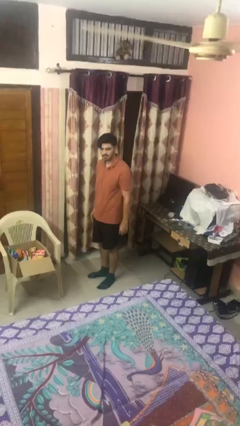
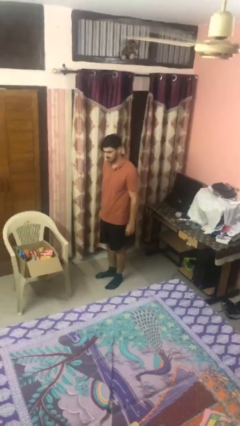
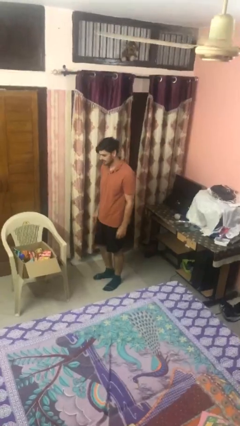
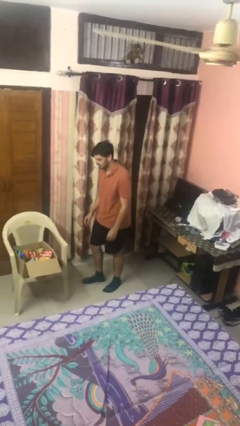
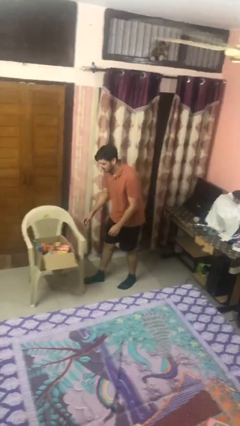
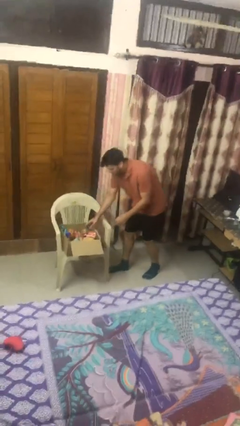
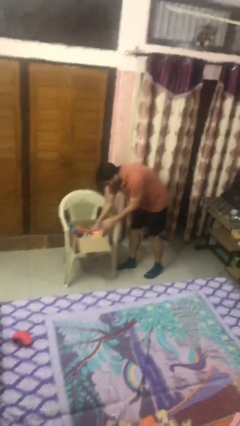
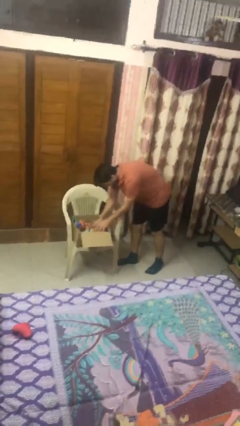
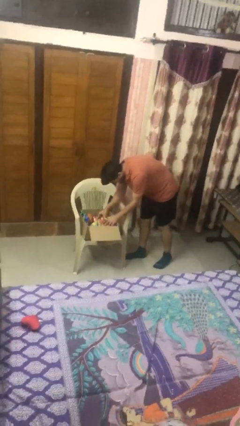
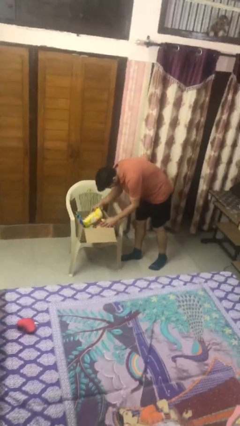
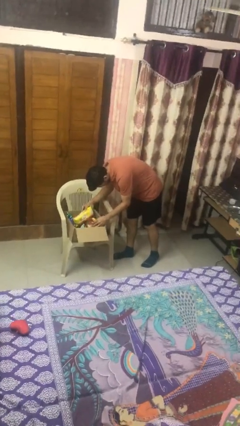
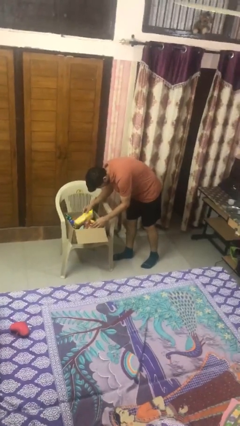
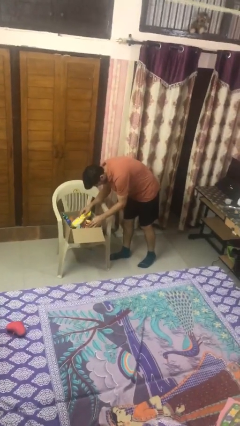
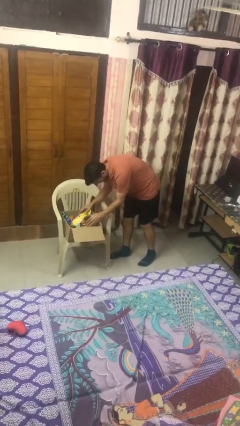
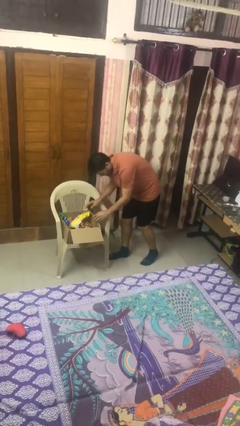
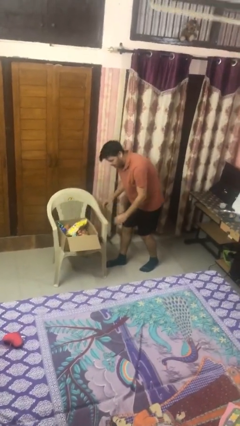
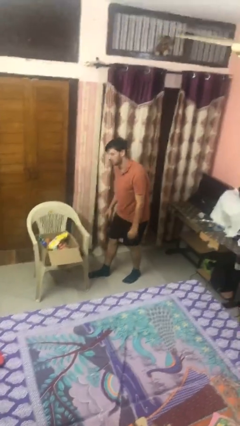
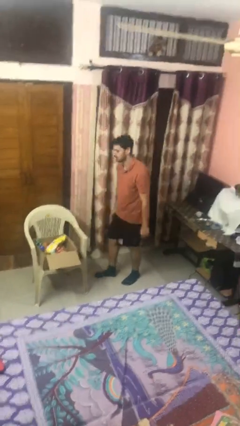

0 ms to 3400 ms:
person searches in box

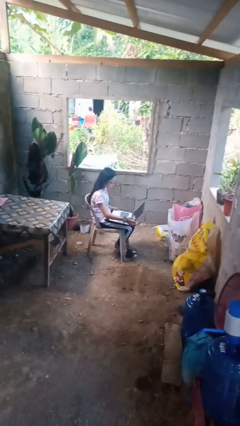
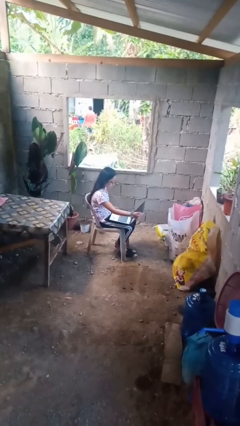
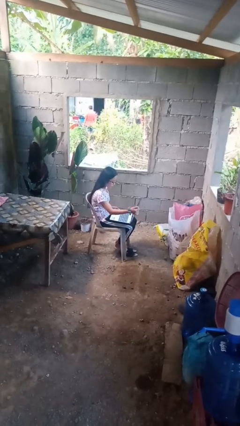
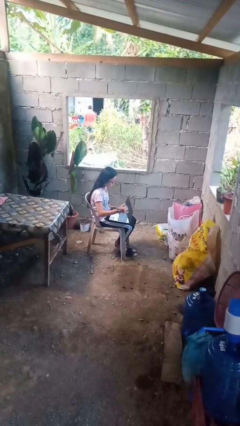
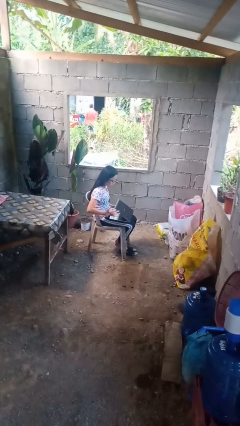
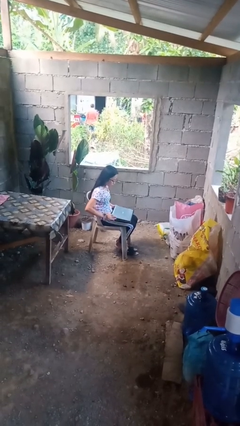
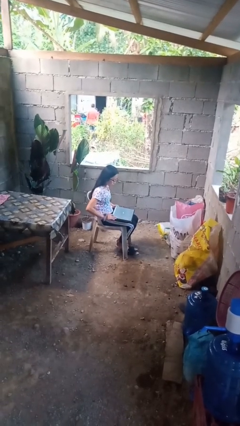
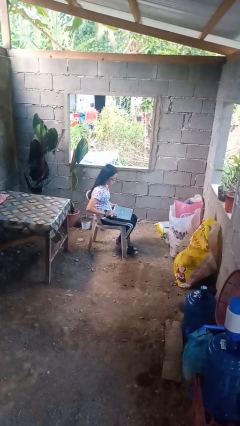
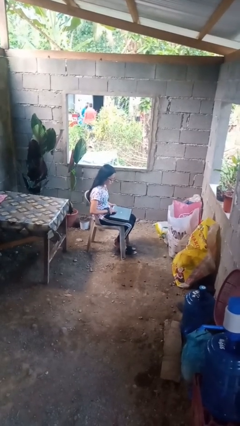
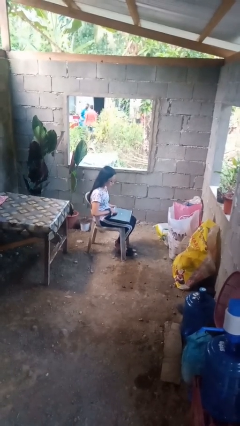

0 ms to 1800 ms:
person closes laptop

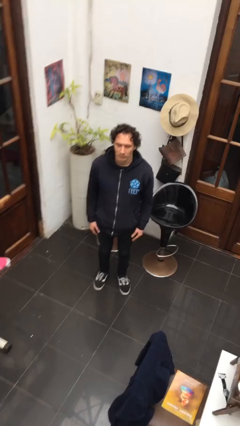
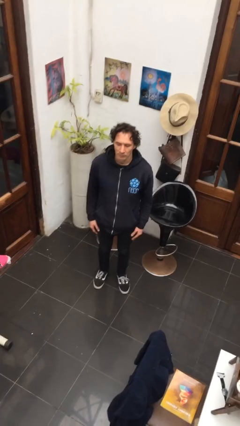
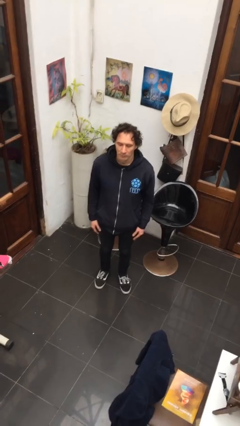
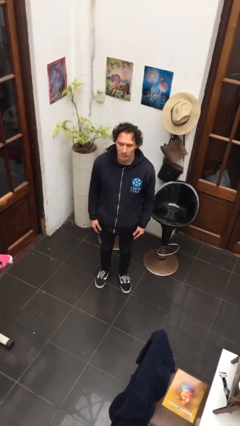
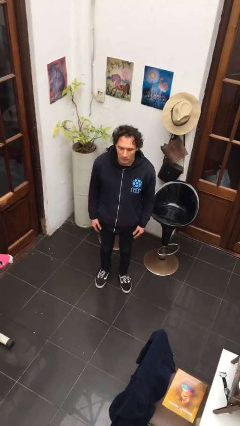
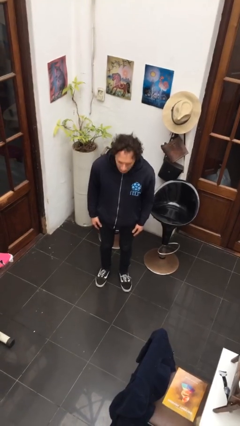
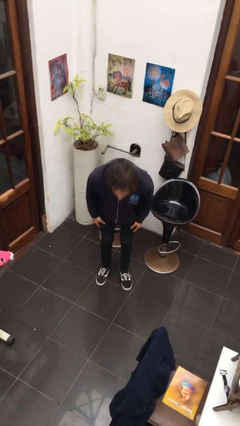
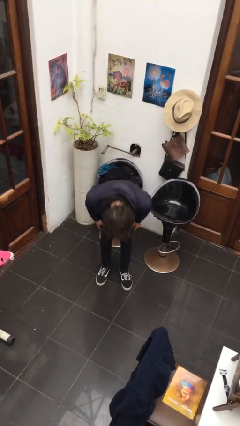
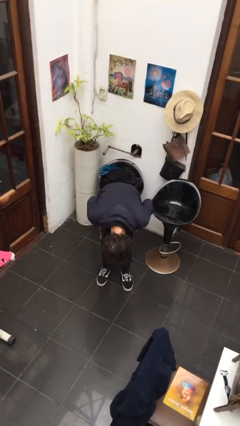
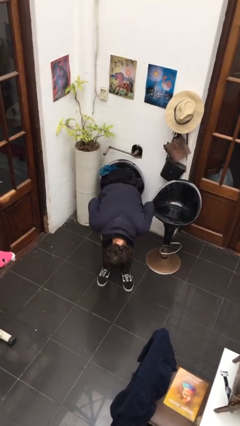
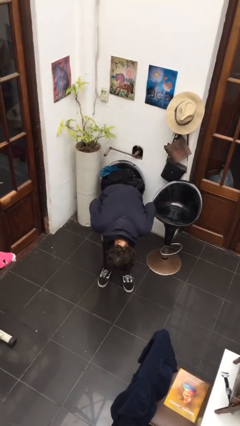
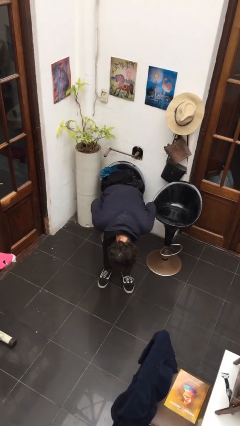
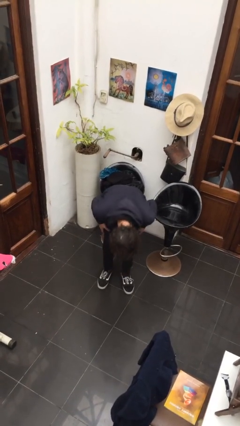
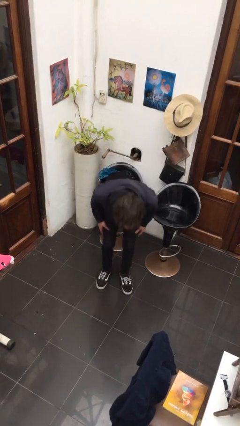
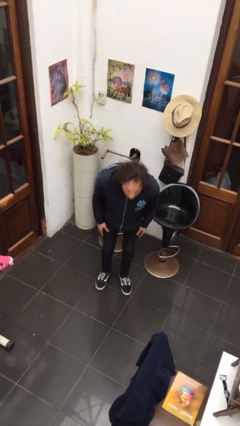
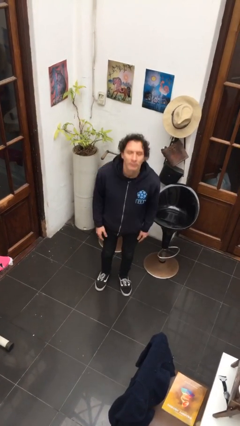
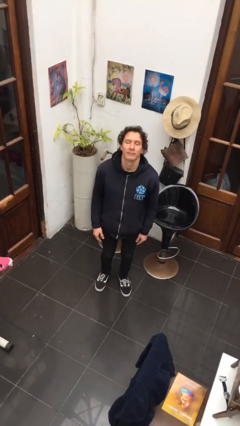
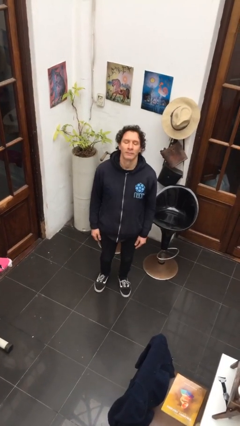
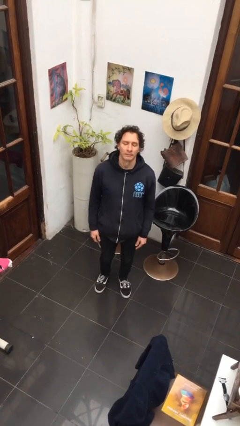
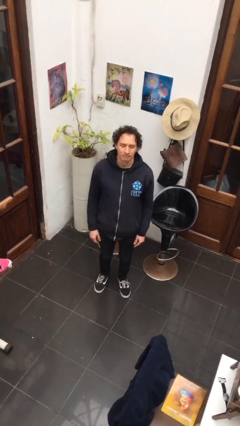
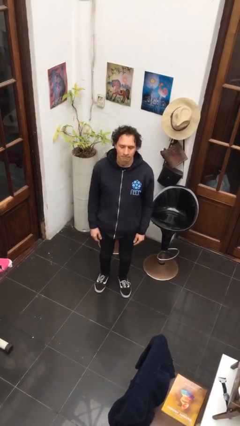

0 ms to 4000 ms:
person bows

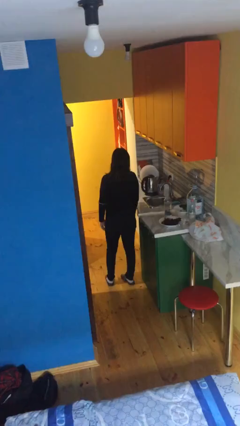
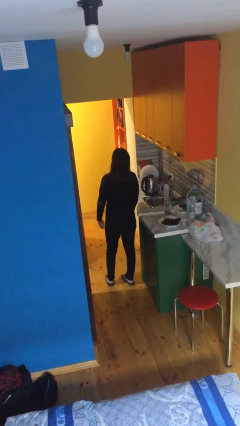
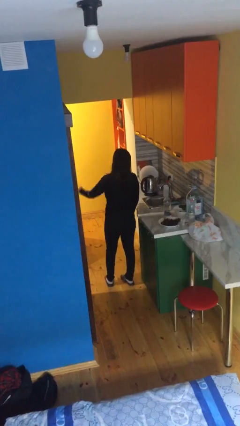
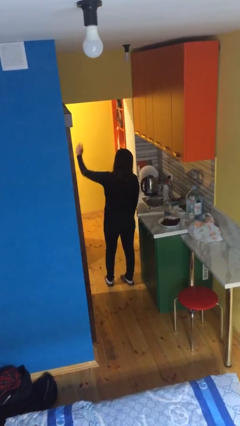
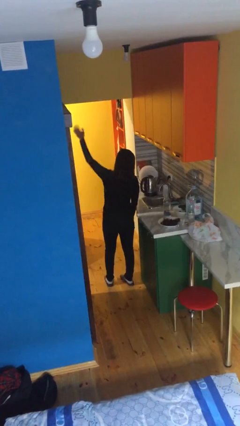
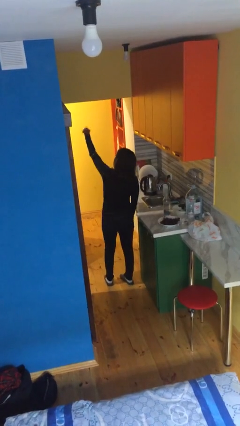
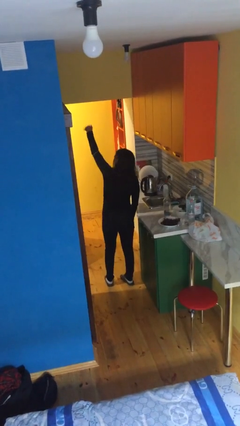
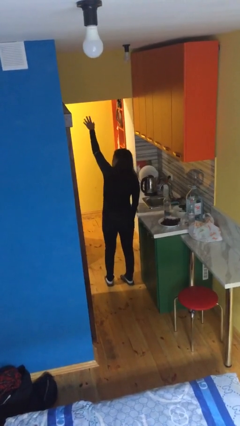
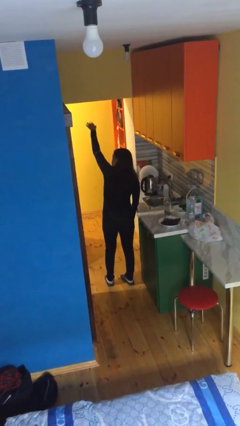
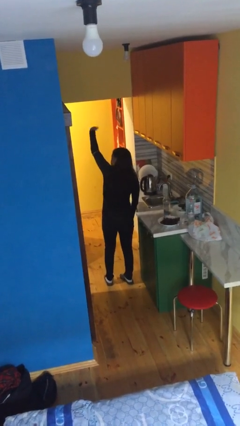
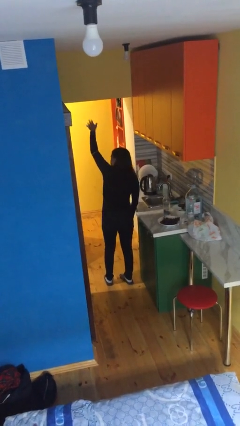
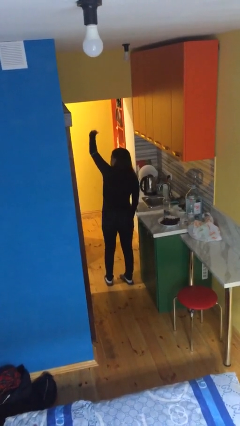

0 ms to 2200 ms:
person gestures come here

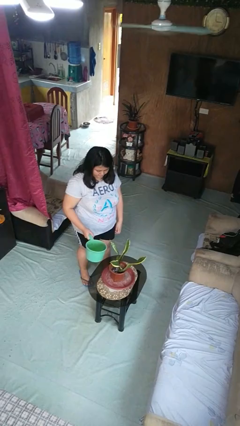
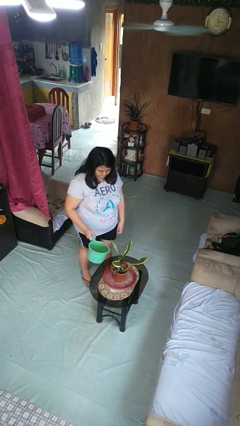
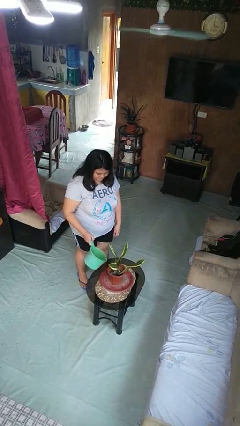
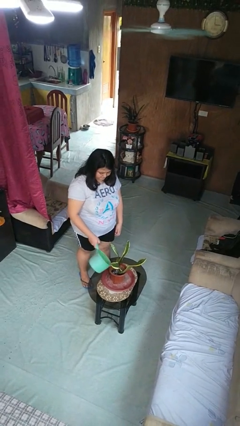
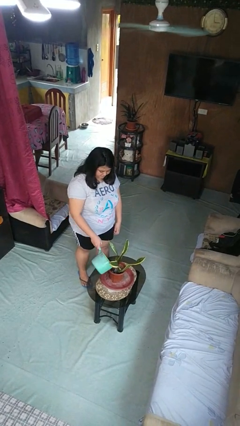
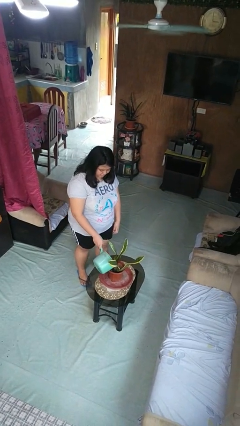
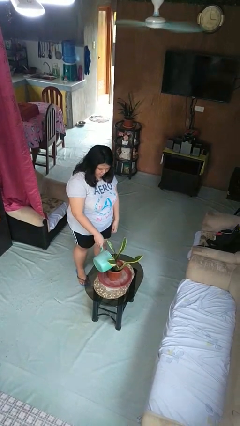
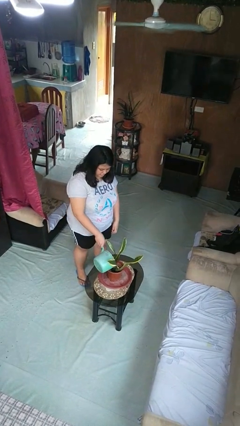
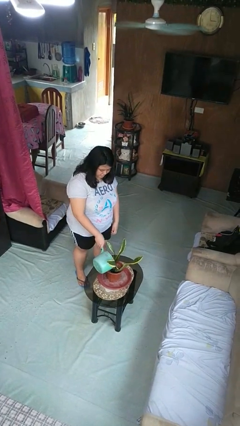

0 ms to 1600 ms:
person waters houseplant

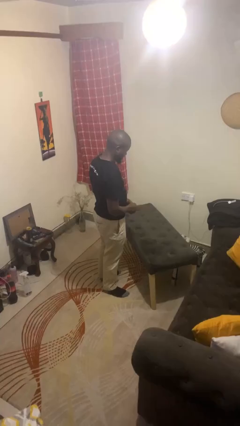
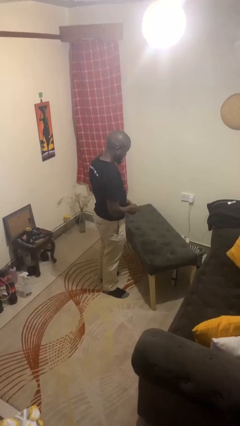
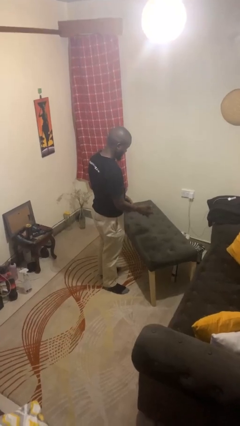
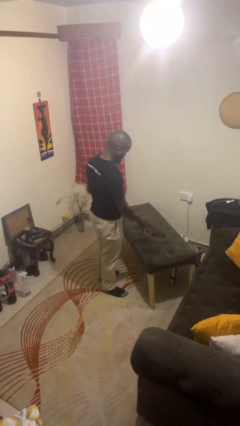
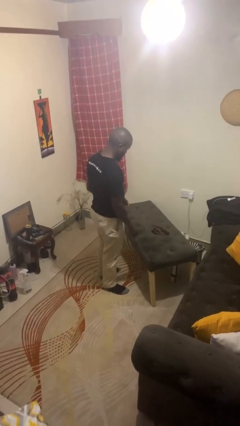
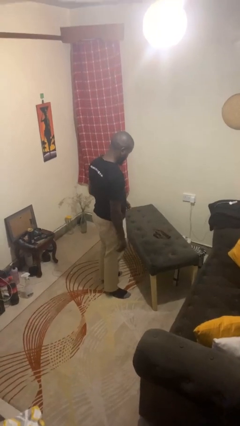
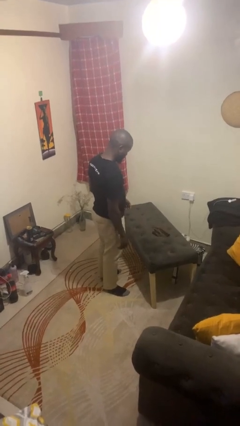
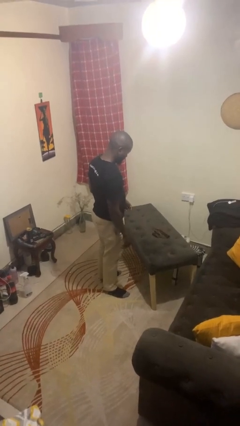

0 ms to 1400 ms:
person throws object on table

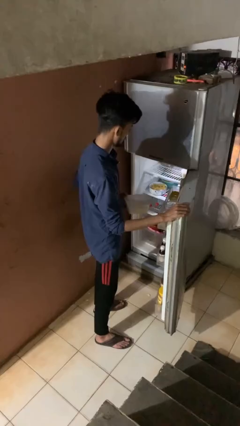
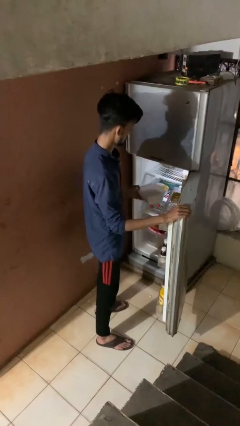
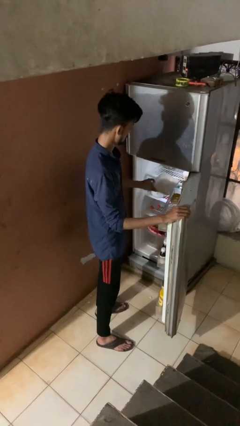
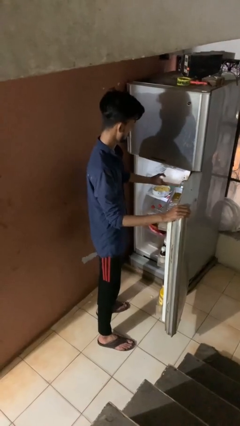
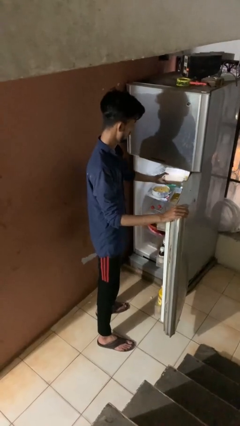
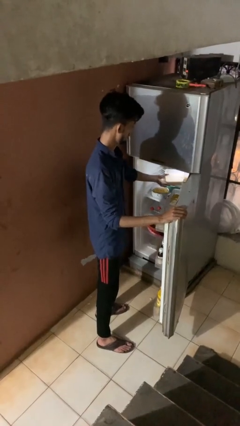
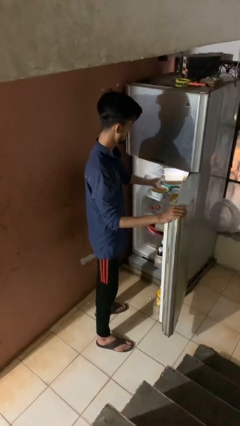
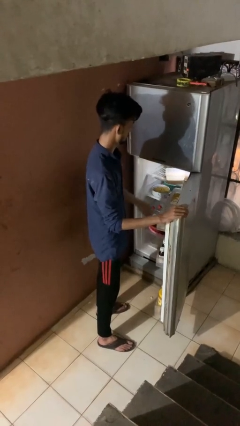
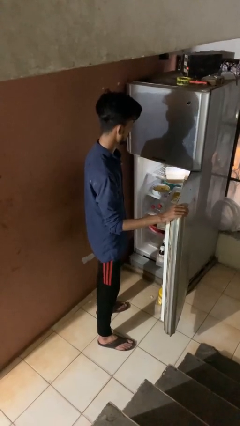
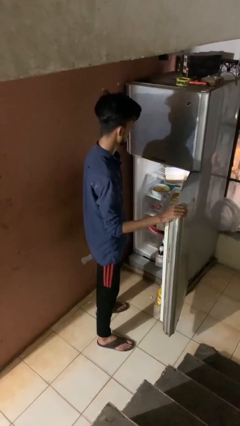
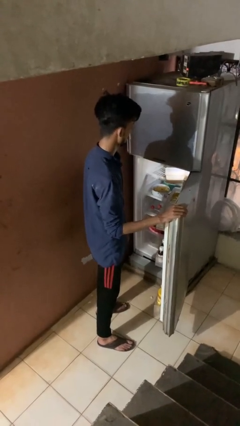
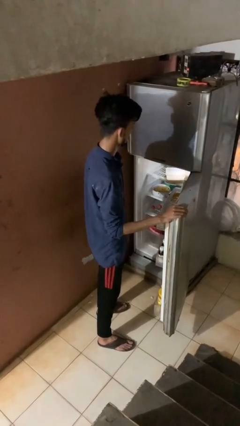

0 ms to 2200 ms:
person loads groceries into refrigerator

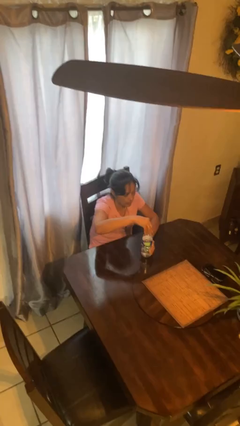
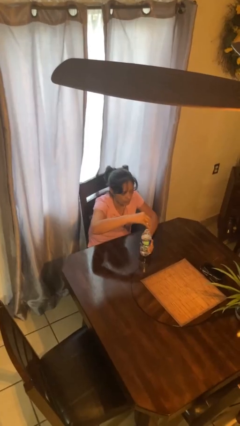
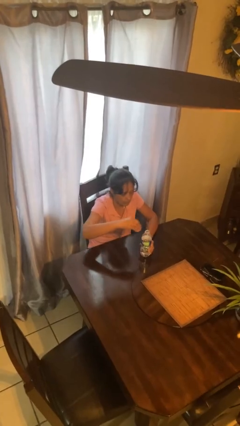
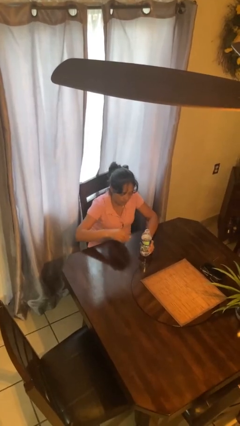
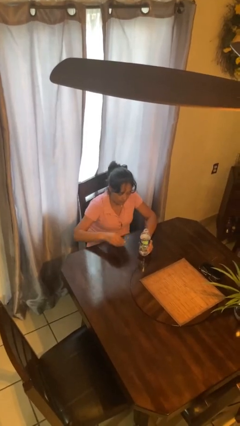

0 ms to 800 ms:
person unscrews lid from bottle
